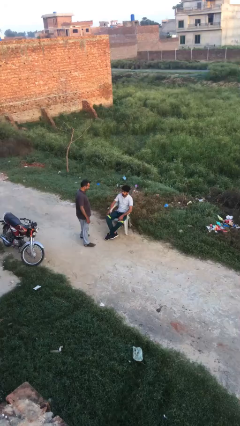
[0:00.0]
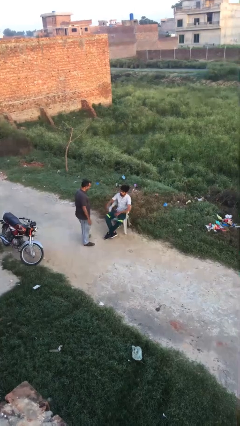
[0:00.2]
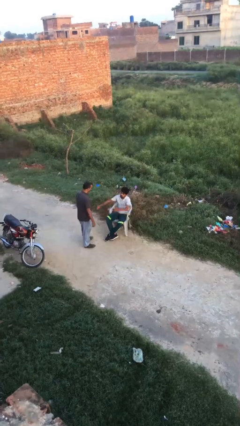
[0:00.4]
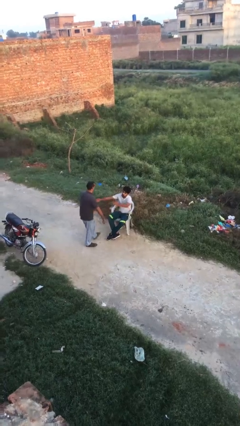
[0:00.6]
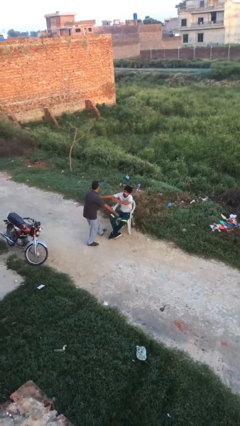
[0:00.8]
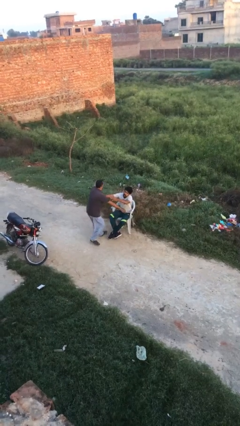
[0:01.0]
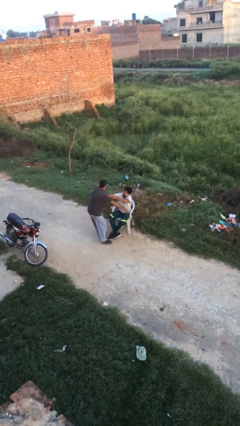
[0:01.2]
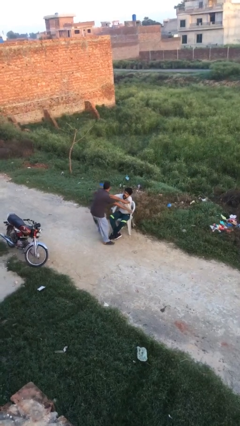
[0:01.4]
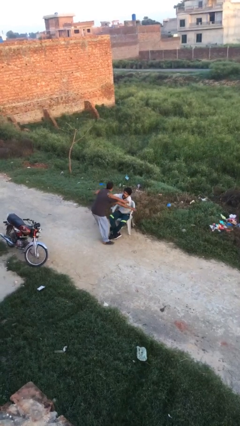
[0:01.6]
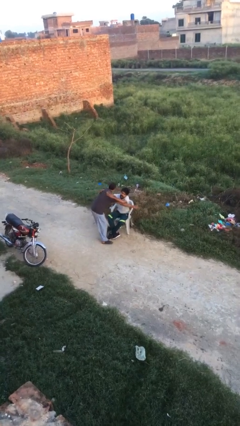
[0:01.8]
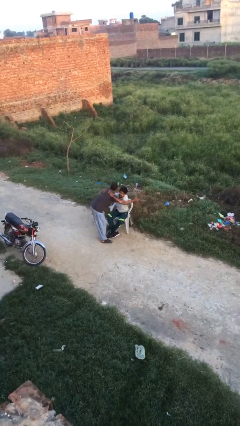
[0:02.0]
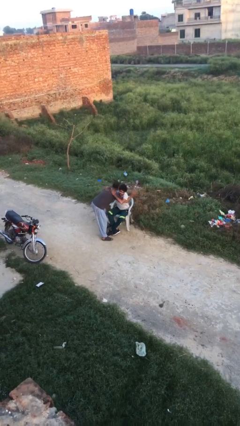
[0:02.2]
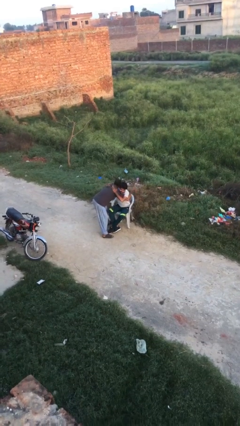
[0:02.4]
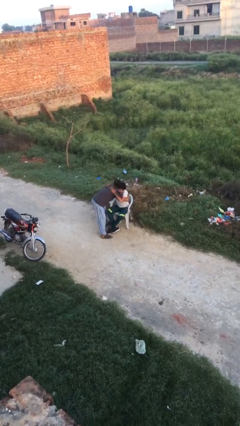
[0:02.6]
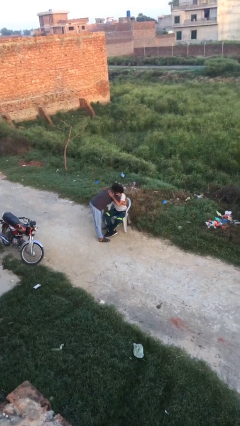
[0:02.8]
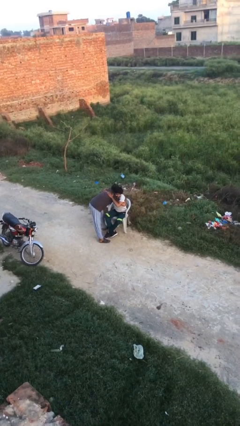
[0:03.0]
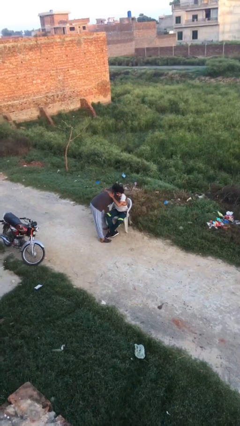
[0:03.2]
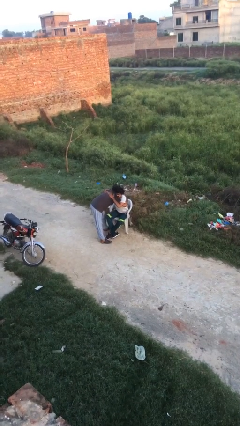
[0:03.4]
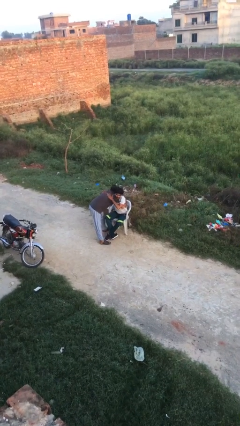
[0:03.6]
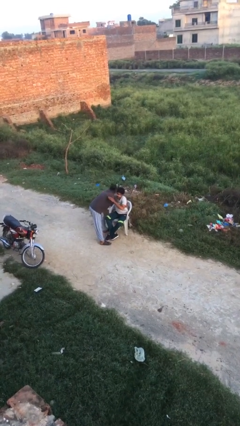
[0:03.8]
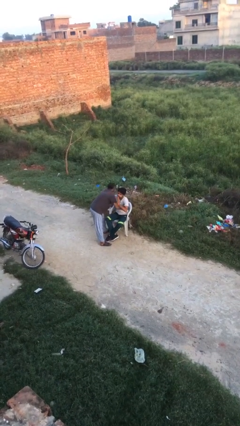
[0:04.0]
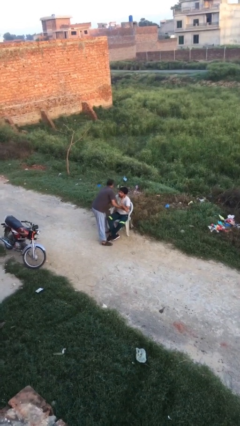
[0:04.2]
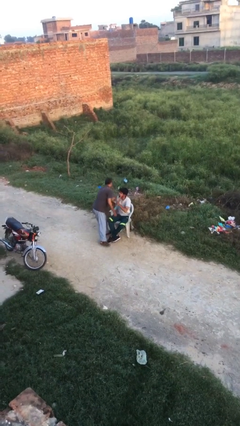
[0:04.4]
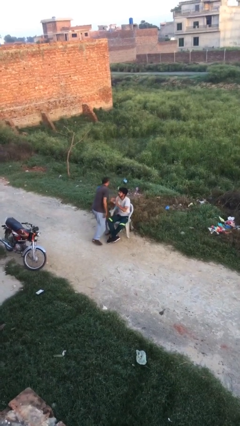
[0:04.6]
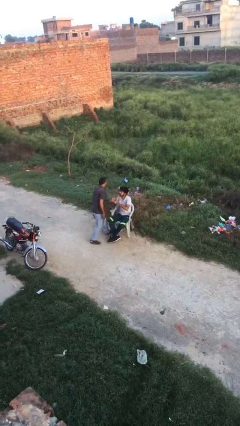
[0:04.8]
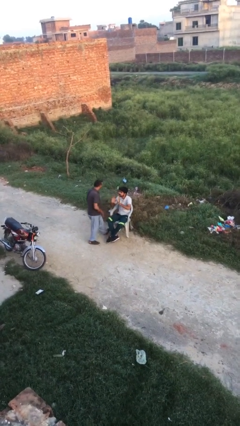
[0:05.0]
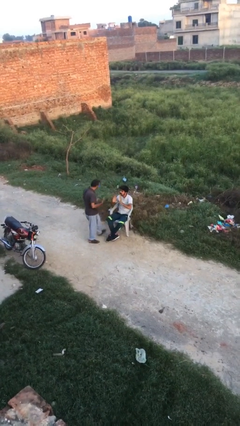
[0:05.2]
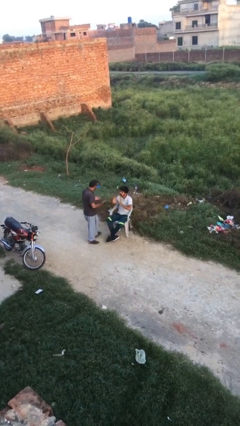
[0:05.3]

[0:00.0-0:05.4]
person embraces person

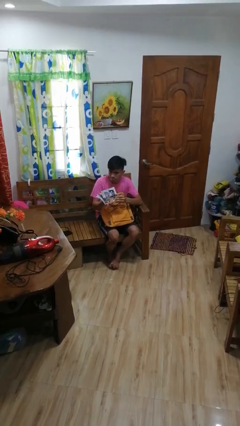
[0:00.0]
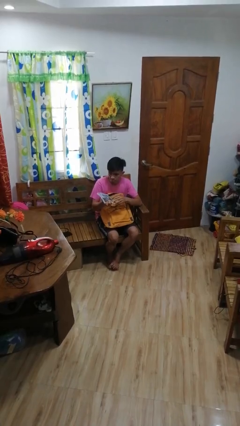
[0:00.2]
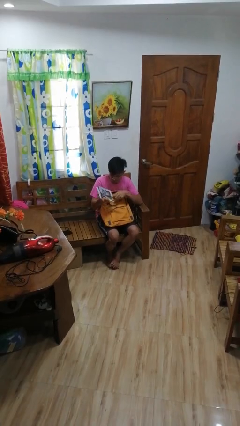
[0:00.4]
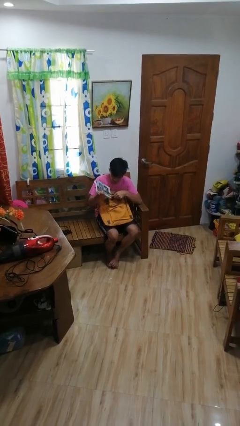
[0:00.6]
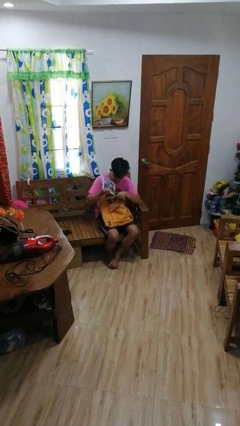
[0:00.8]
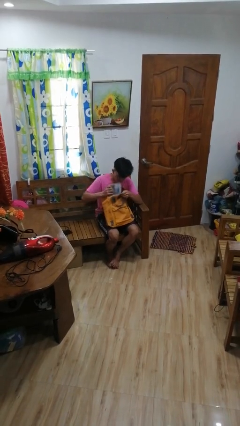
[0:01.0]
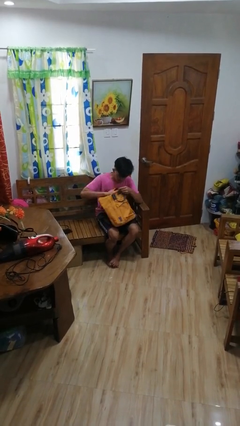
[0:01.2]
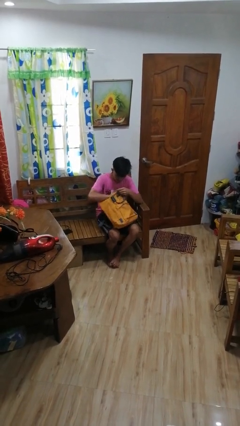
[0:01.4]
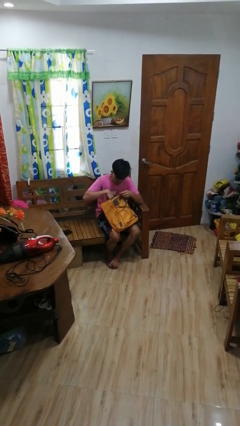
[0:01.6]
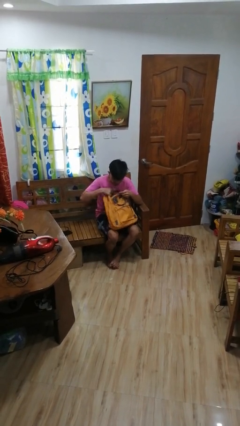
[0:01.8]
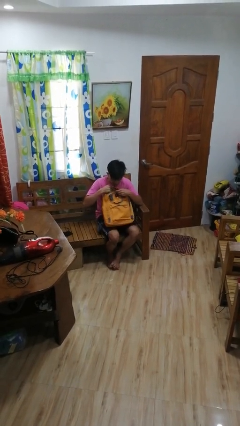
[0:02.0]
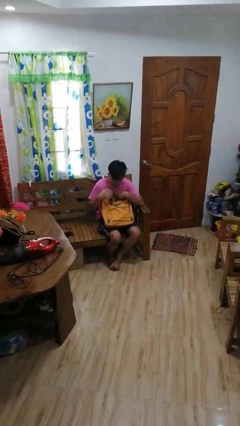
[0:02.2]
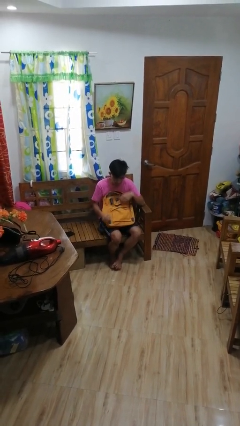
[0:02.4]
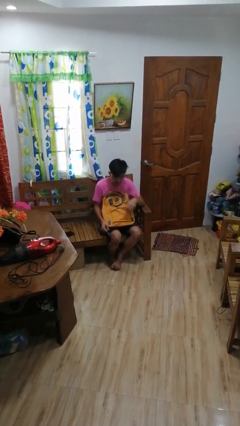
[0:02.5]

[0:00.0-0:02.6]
person puts object into backpack

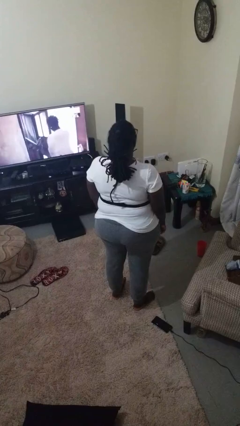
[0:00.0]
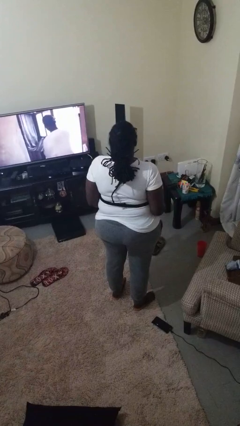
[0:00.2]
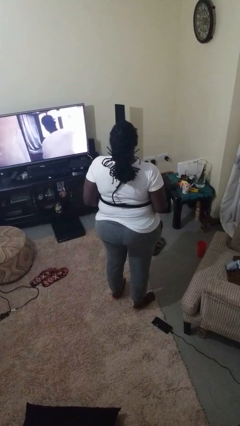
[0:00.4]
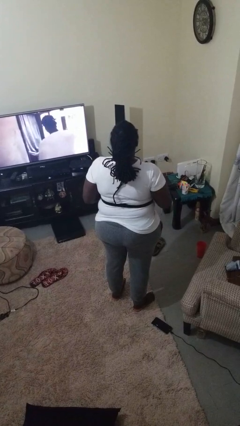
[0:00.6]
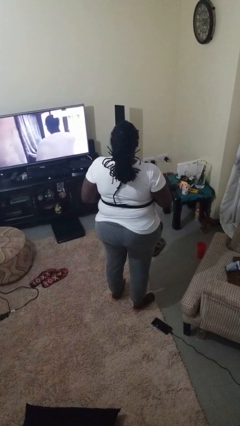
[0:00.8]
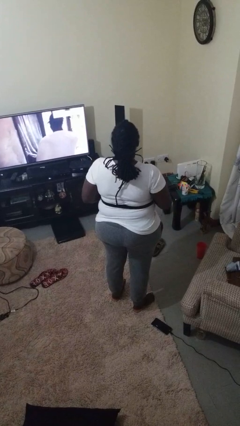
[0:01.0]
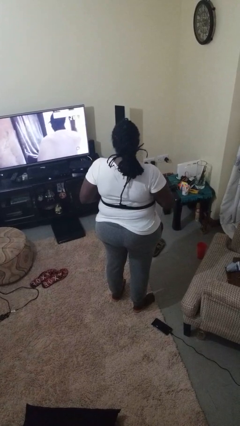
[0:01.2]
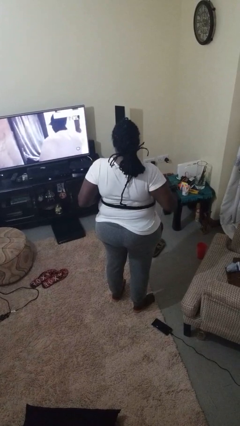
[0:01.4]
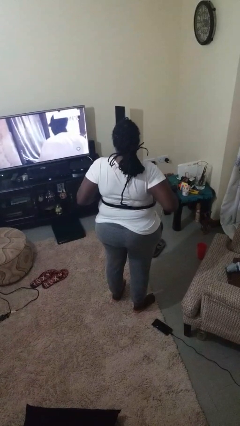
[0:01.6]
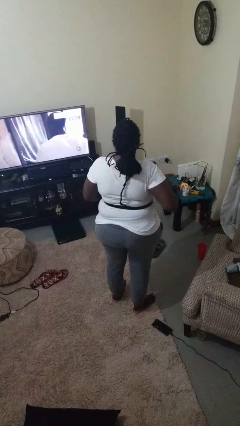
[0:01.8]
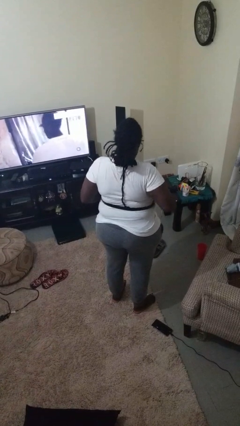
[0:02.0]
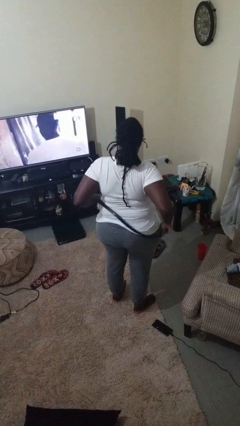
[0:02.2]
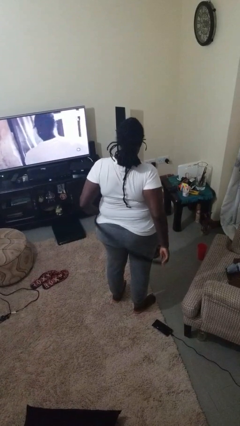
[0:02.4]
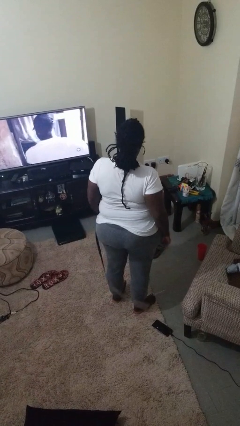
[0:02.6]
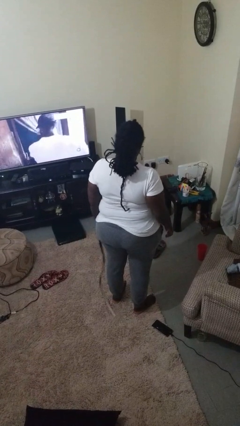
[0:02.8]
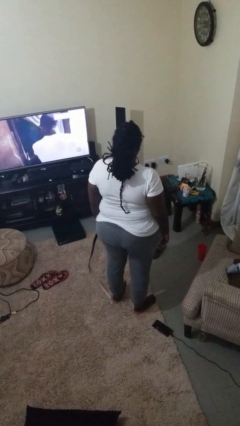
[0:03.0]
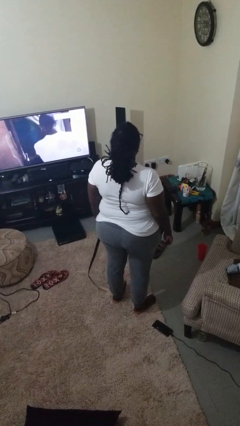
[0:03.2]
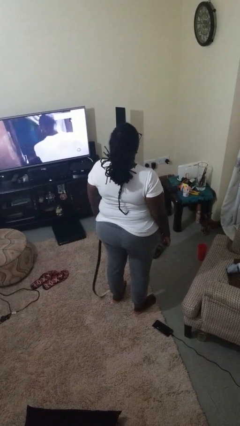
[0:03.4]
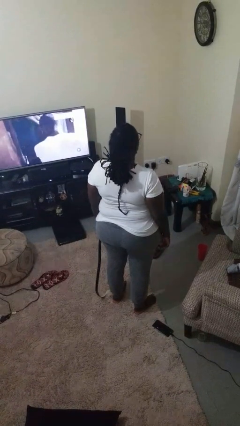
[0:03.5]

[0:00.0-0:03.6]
person takes off belt

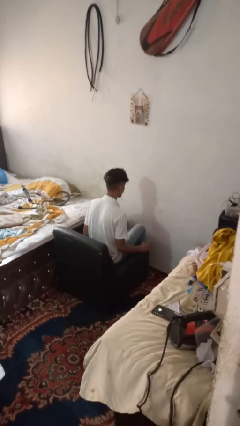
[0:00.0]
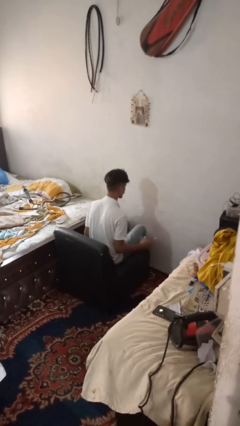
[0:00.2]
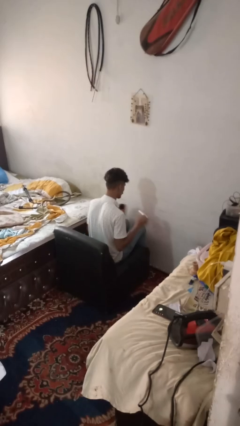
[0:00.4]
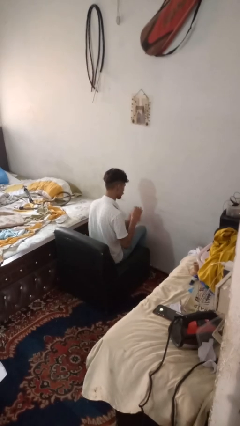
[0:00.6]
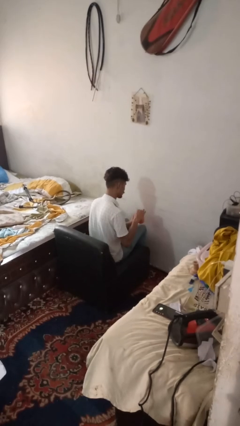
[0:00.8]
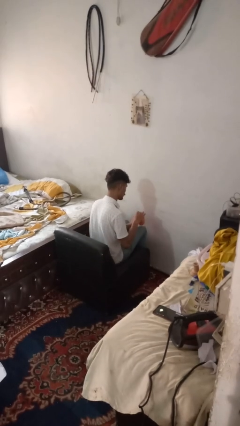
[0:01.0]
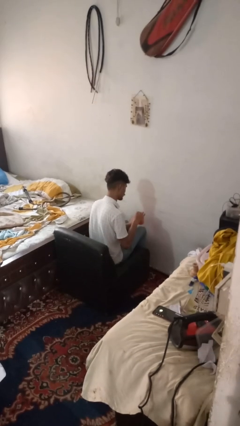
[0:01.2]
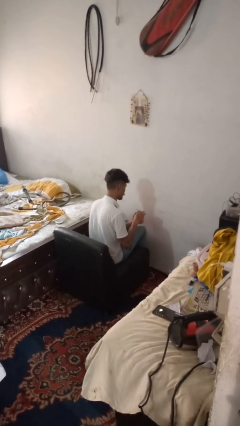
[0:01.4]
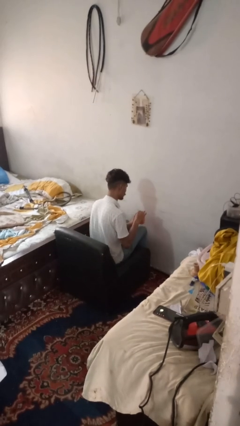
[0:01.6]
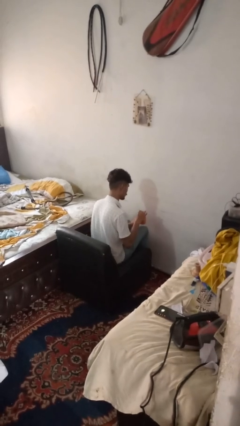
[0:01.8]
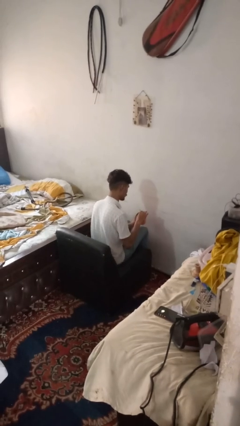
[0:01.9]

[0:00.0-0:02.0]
person stirs mug

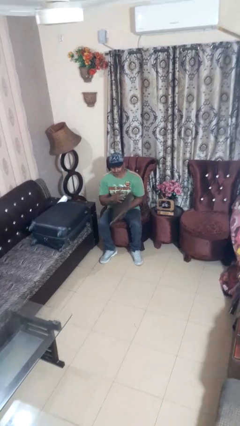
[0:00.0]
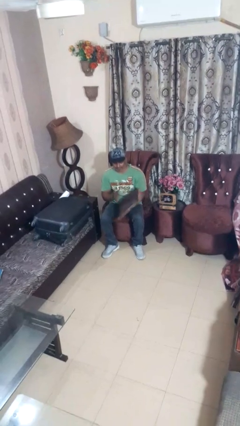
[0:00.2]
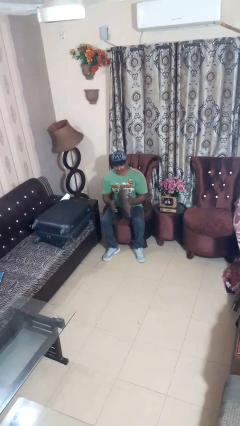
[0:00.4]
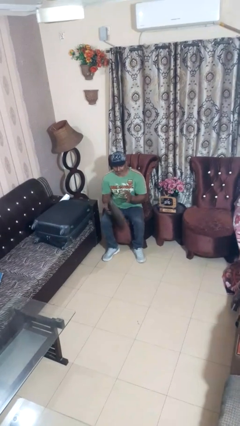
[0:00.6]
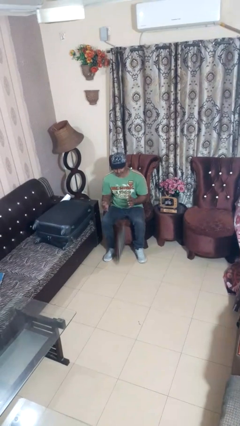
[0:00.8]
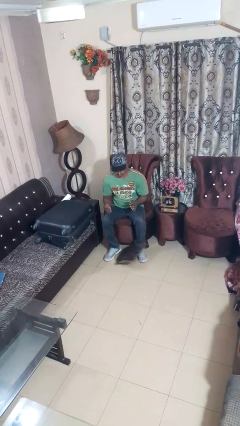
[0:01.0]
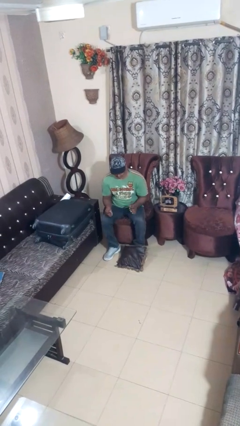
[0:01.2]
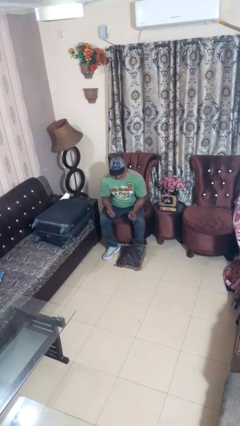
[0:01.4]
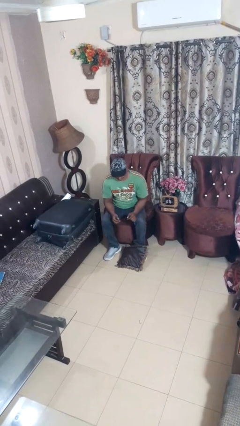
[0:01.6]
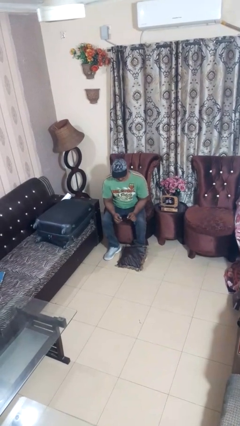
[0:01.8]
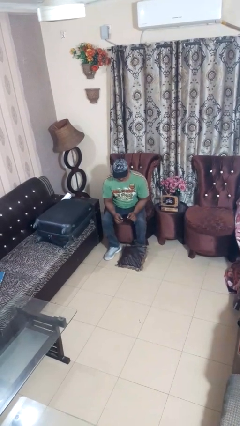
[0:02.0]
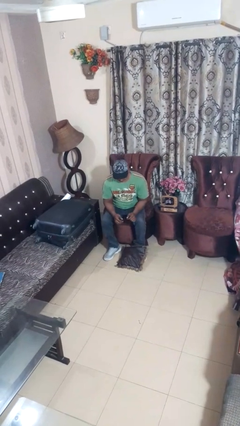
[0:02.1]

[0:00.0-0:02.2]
person drops object

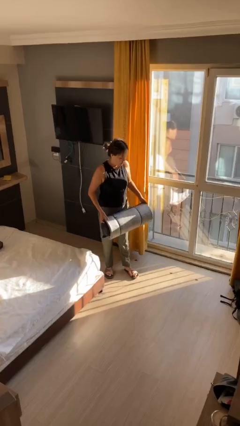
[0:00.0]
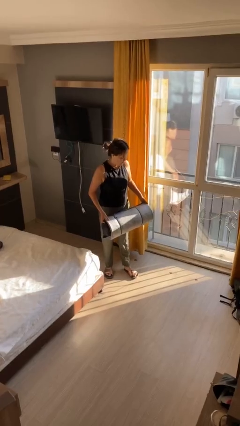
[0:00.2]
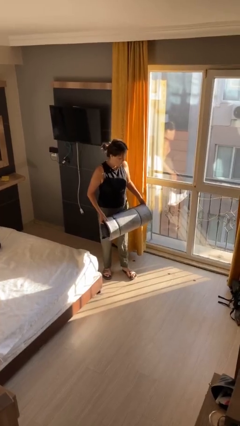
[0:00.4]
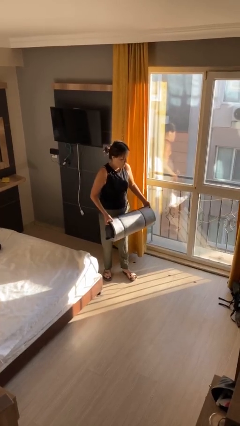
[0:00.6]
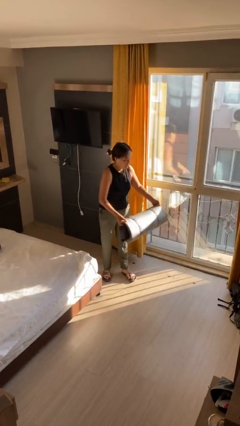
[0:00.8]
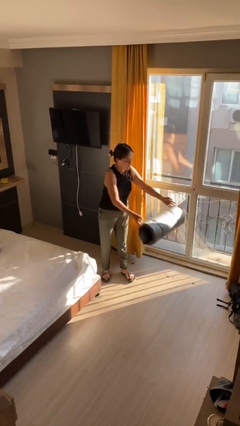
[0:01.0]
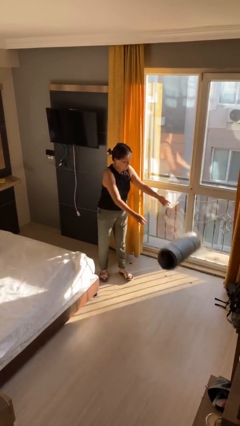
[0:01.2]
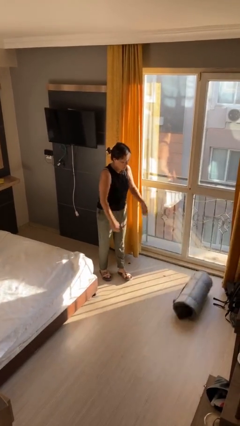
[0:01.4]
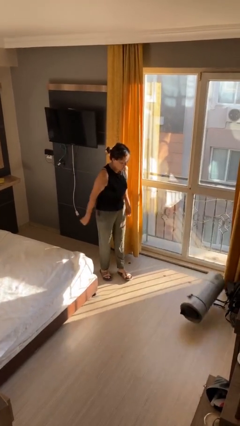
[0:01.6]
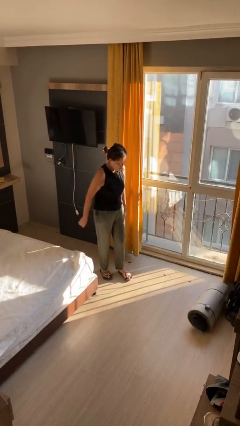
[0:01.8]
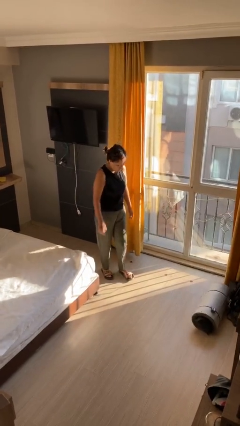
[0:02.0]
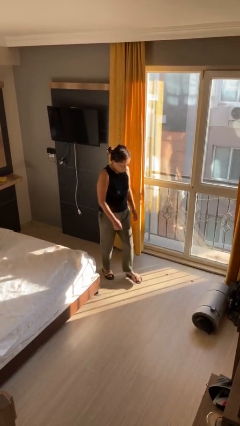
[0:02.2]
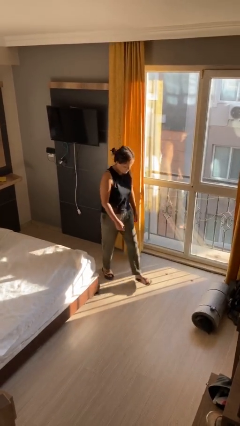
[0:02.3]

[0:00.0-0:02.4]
person throws object to ground
